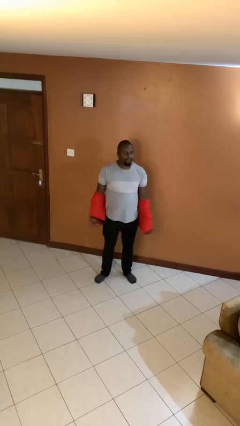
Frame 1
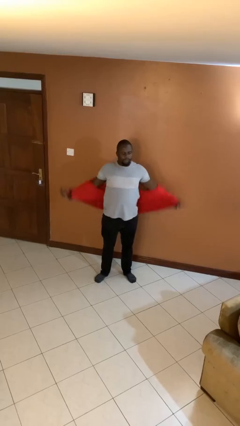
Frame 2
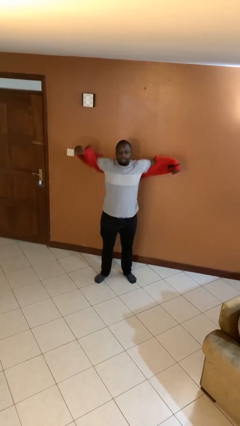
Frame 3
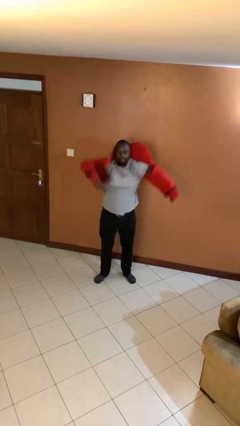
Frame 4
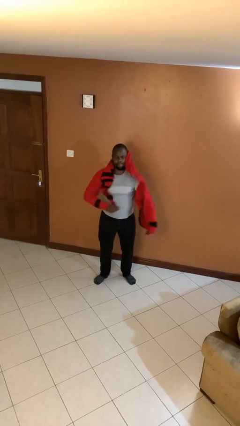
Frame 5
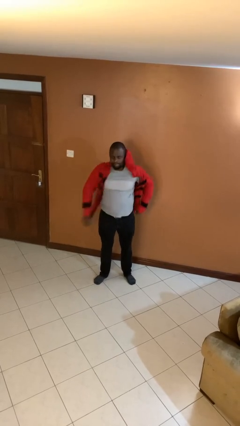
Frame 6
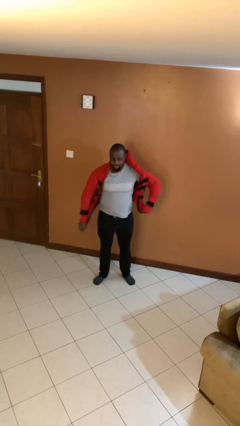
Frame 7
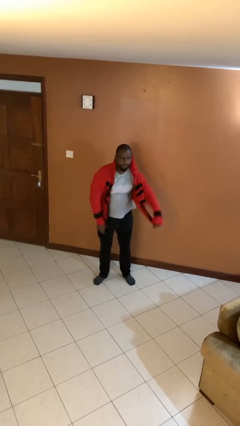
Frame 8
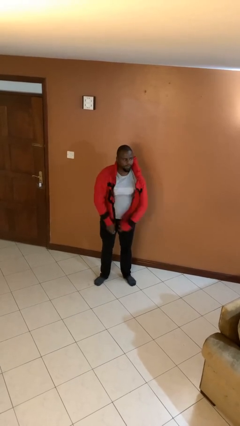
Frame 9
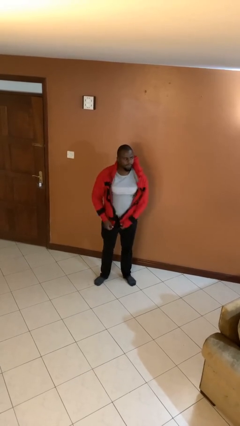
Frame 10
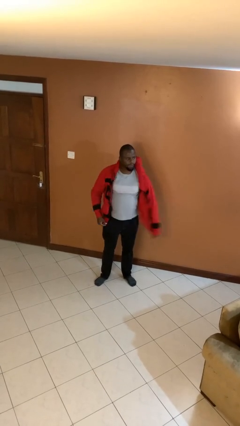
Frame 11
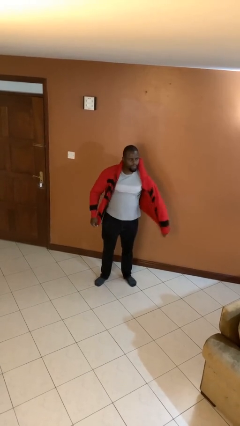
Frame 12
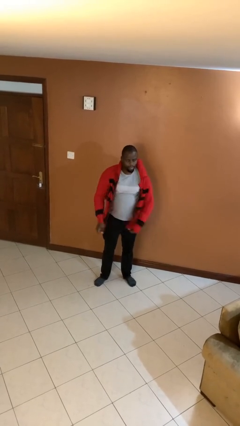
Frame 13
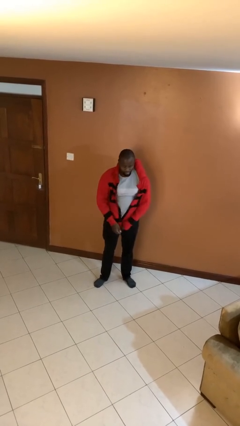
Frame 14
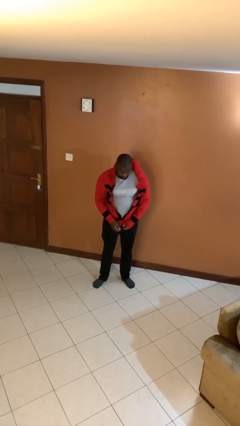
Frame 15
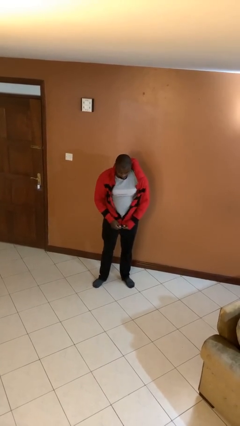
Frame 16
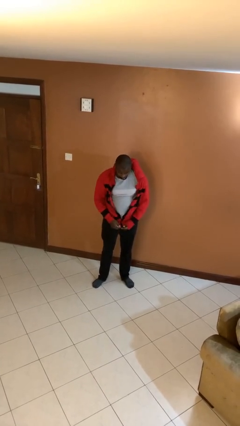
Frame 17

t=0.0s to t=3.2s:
person puts on jacket

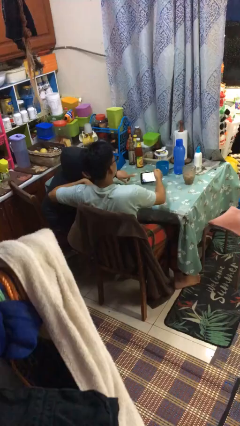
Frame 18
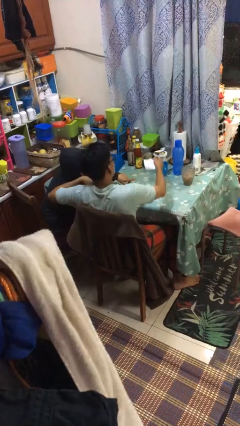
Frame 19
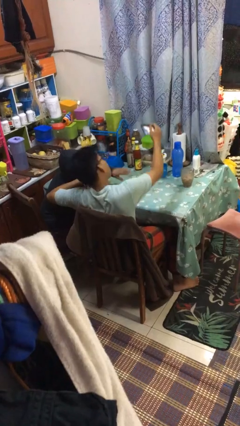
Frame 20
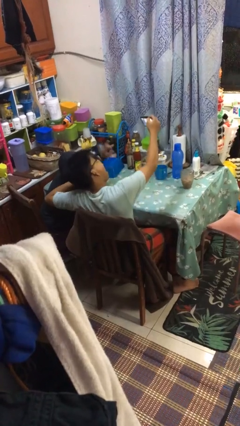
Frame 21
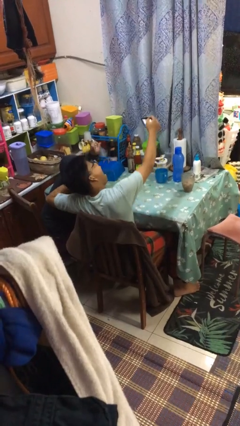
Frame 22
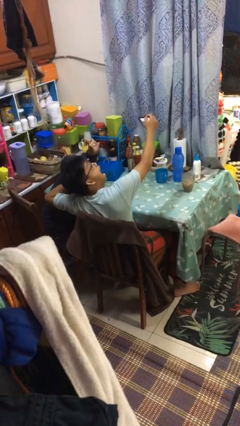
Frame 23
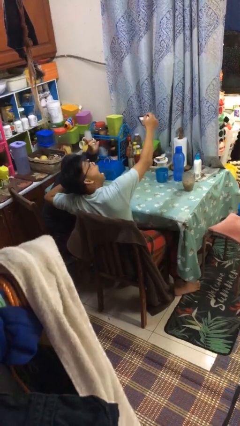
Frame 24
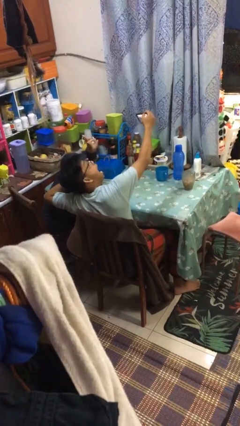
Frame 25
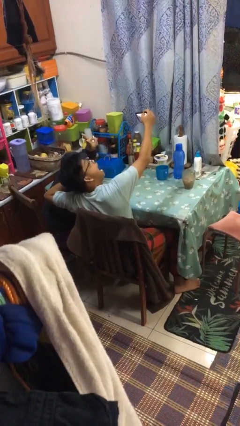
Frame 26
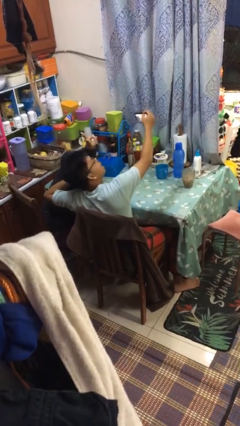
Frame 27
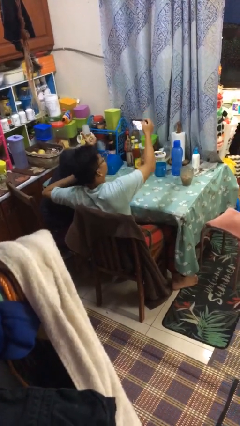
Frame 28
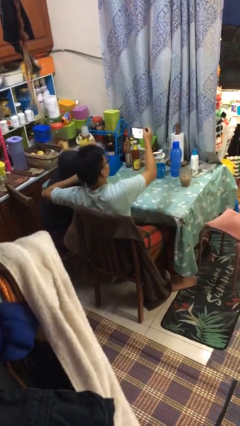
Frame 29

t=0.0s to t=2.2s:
person takes selfie with person

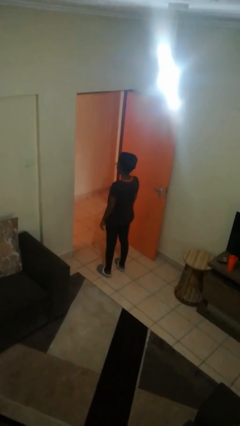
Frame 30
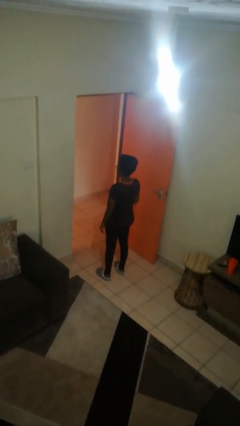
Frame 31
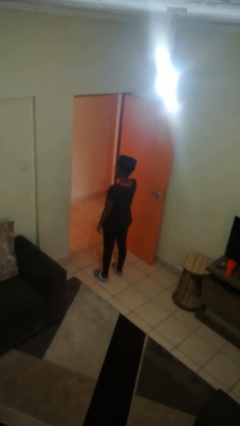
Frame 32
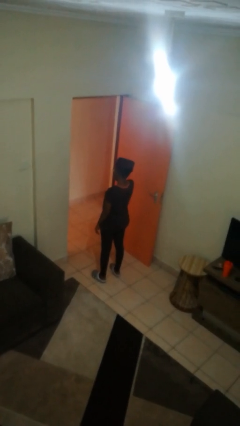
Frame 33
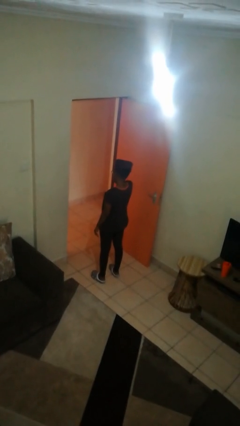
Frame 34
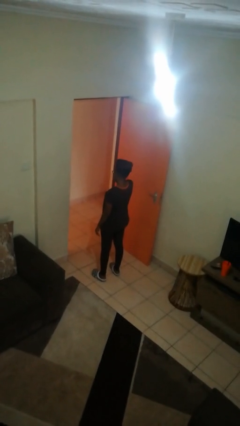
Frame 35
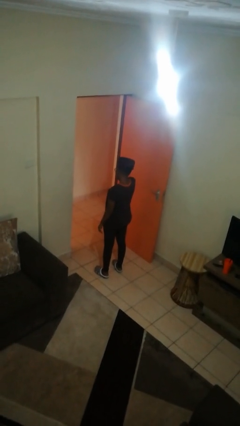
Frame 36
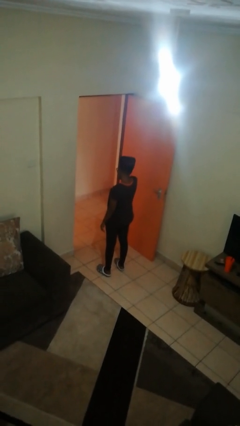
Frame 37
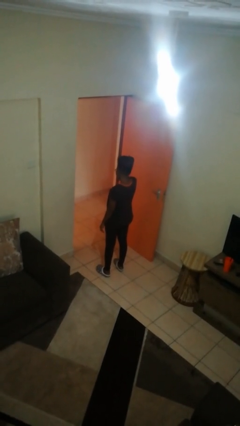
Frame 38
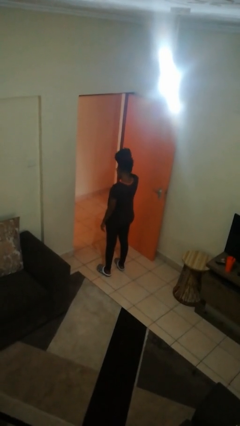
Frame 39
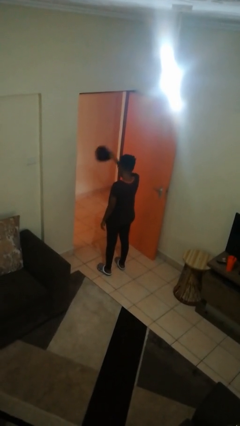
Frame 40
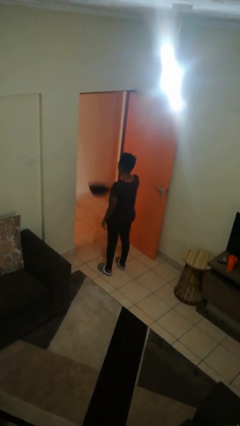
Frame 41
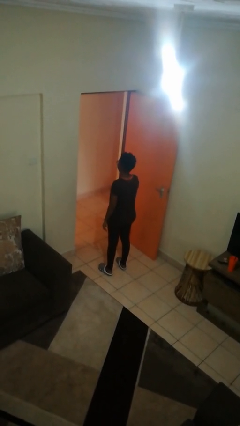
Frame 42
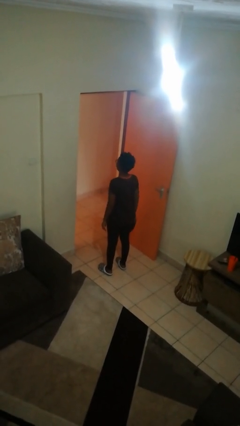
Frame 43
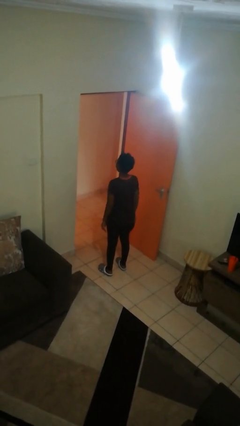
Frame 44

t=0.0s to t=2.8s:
person takes off hat

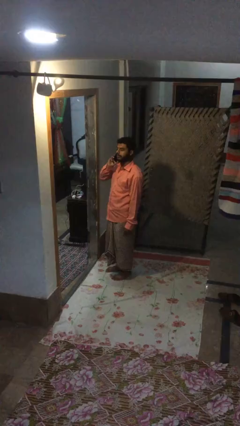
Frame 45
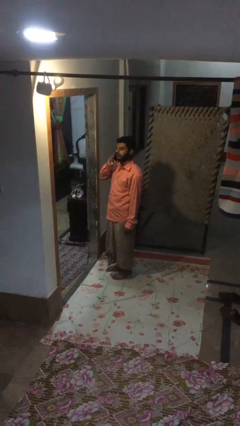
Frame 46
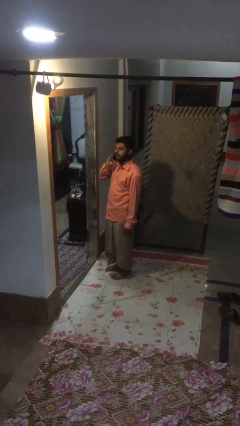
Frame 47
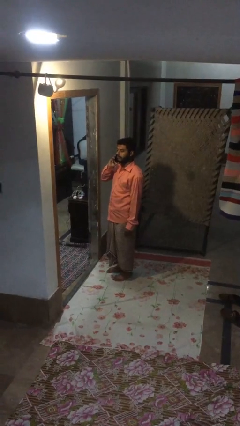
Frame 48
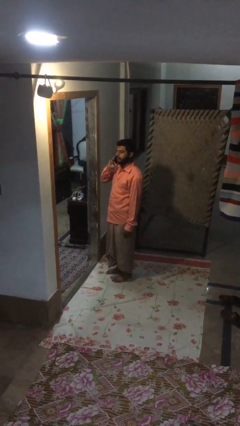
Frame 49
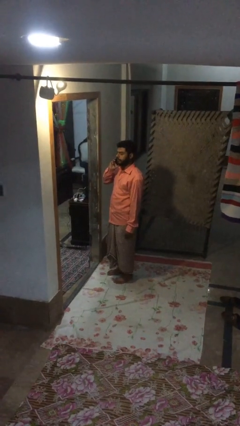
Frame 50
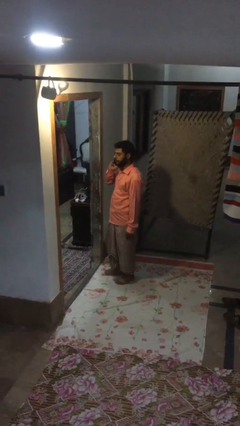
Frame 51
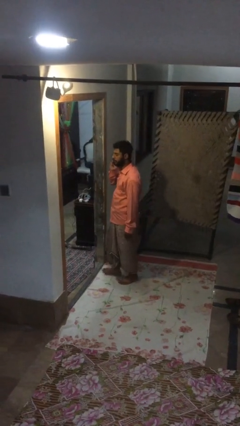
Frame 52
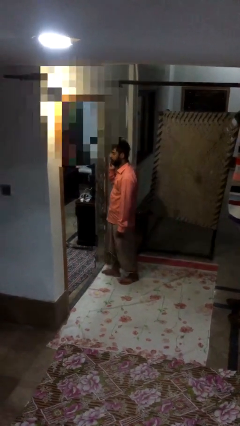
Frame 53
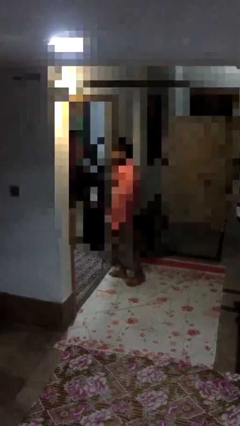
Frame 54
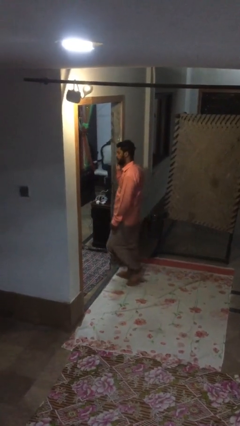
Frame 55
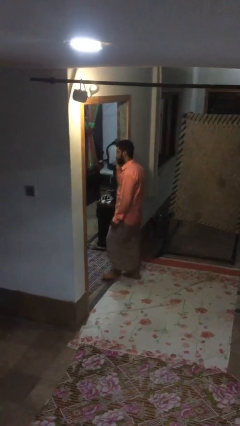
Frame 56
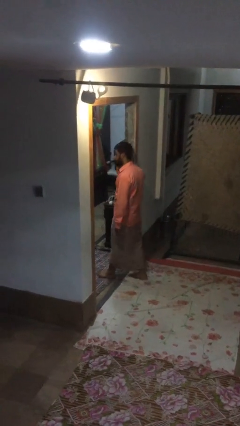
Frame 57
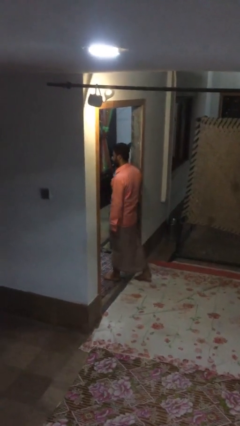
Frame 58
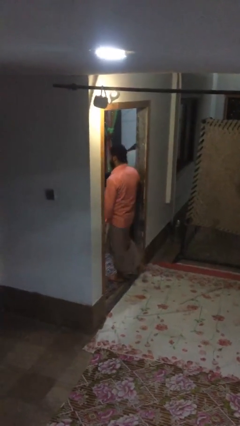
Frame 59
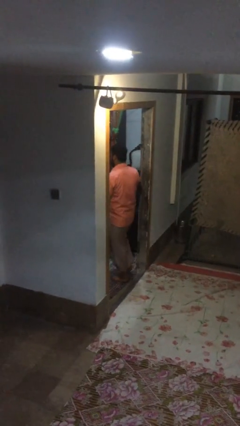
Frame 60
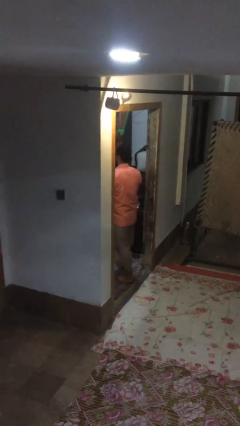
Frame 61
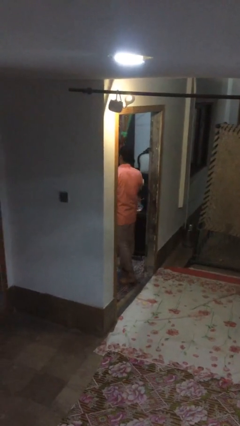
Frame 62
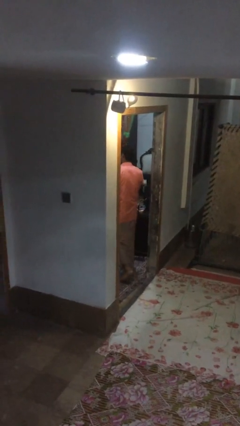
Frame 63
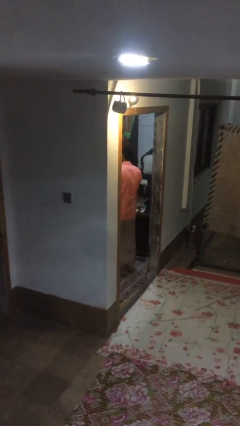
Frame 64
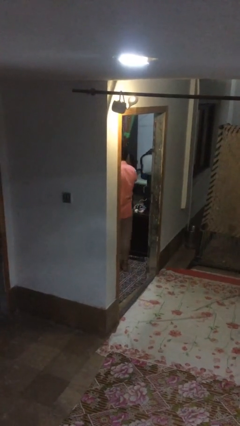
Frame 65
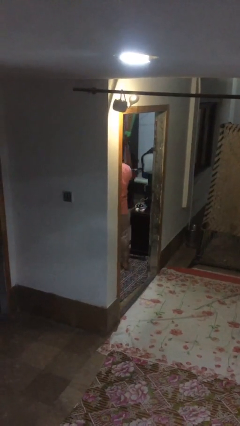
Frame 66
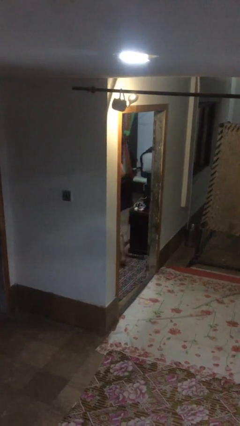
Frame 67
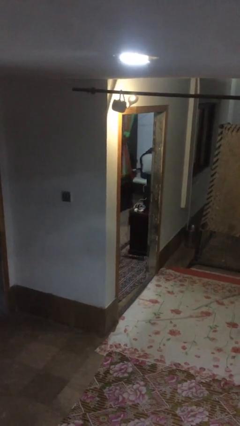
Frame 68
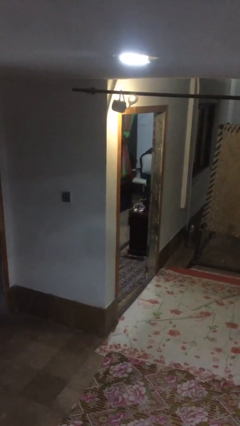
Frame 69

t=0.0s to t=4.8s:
person exits scene through structure

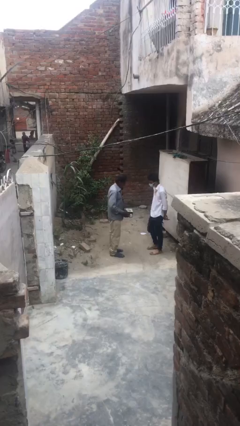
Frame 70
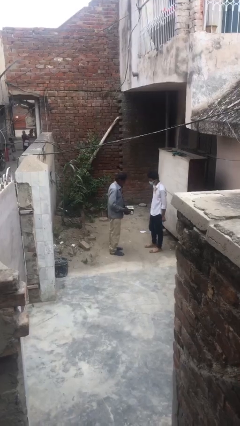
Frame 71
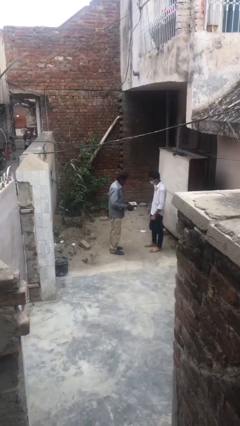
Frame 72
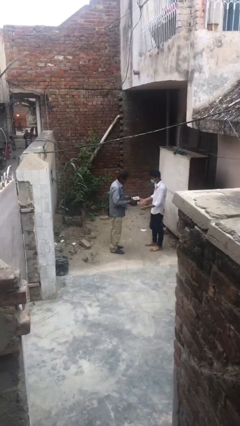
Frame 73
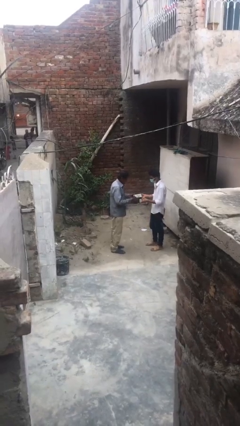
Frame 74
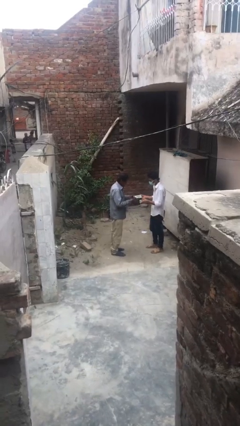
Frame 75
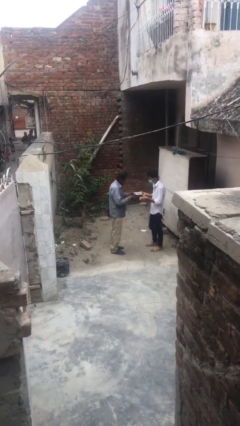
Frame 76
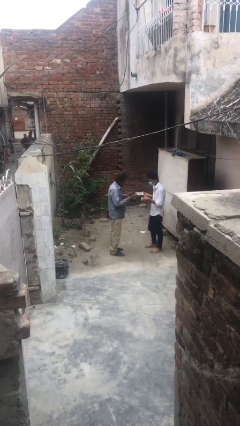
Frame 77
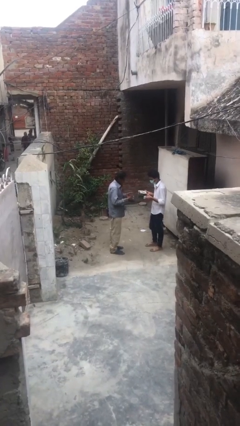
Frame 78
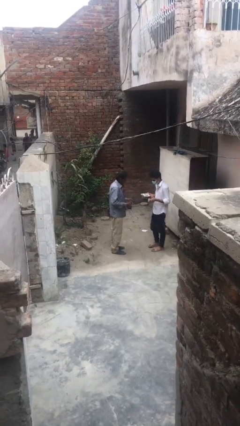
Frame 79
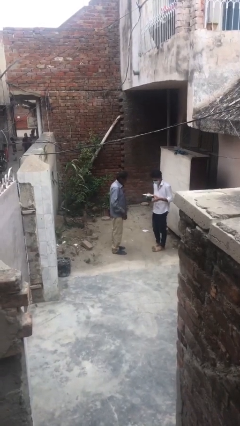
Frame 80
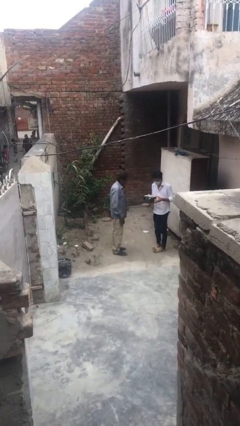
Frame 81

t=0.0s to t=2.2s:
person transfers object to person

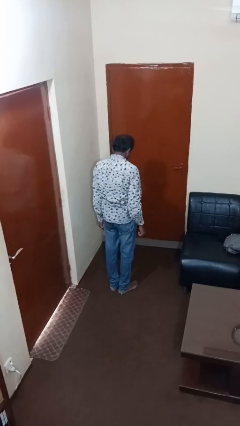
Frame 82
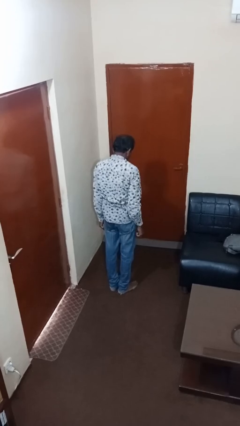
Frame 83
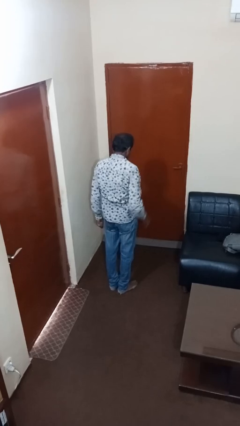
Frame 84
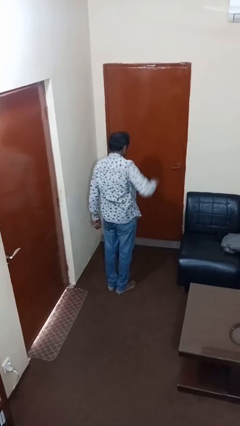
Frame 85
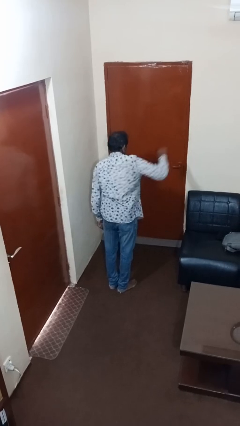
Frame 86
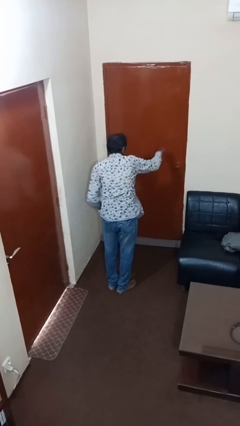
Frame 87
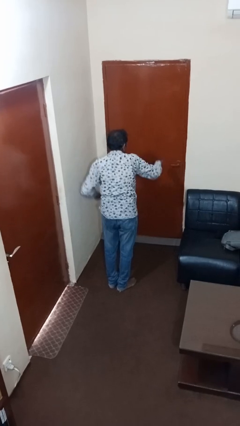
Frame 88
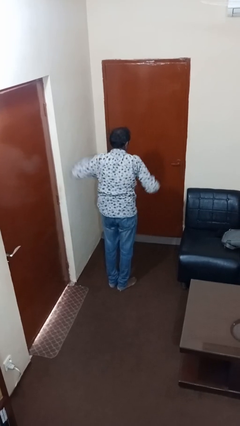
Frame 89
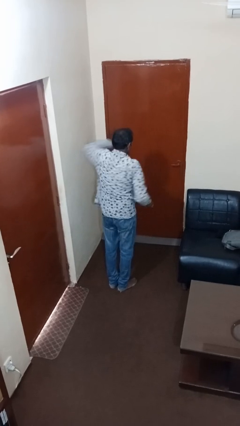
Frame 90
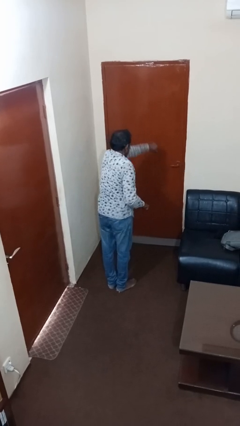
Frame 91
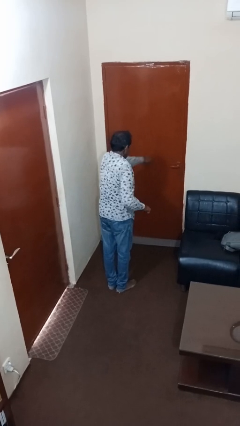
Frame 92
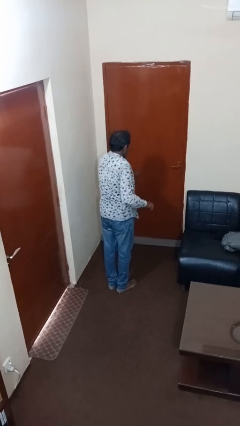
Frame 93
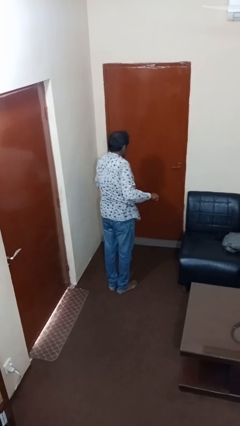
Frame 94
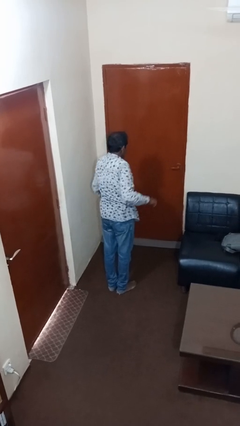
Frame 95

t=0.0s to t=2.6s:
person punches

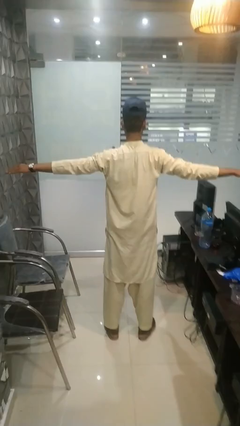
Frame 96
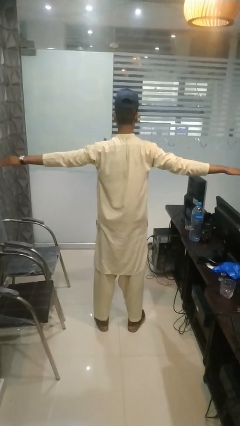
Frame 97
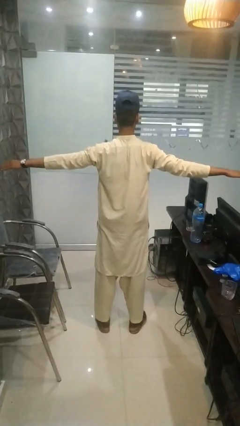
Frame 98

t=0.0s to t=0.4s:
person stretches arms to side
